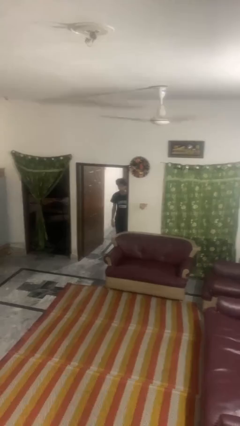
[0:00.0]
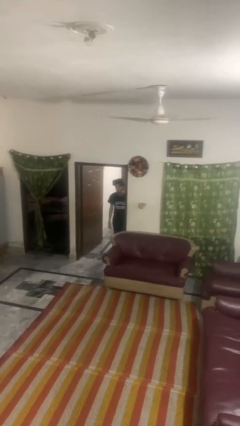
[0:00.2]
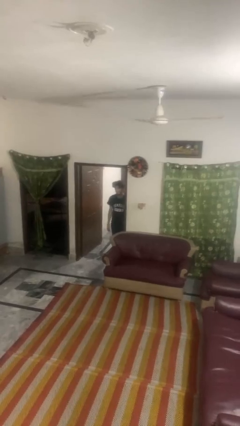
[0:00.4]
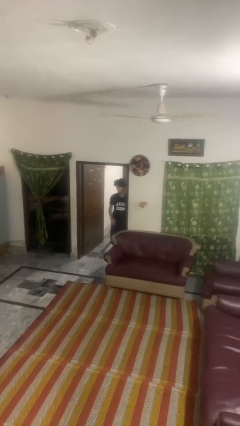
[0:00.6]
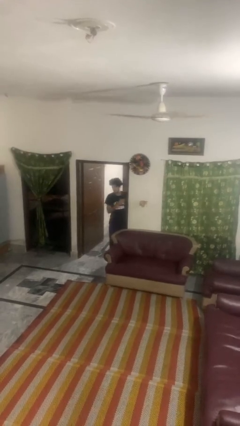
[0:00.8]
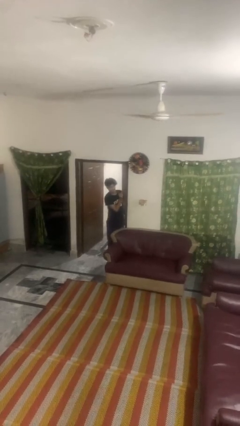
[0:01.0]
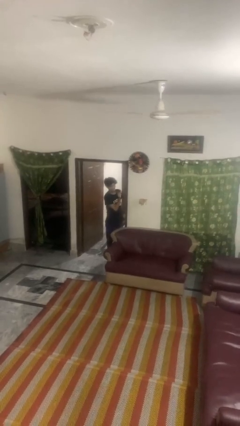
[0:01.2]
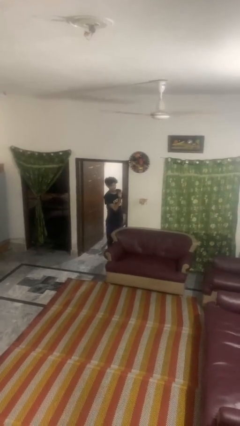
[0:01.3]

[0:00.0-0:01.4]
person bumps into wall

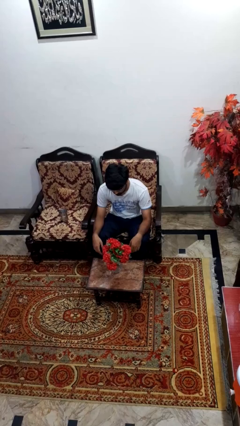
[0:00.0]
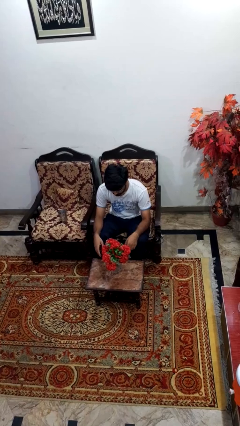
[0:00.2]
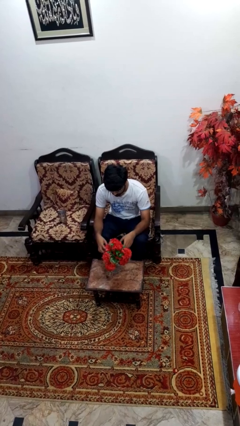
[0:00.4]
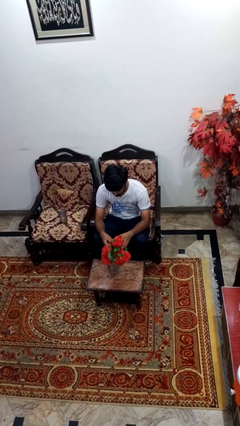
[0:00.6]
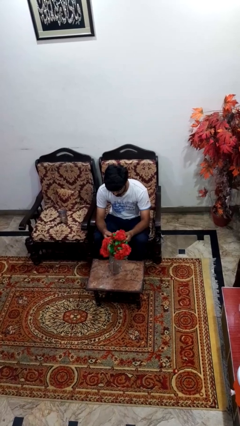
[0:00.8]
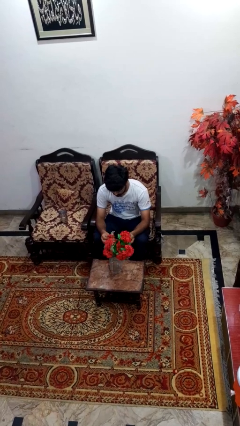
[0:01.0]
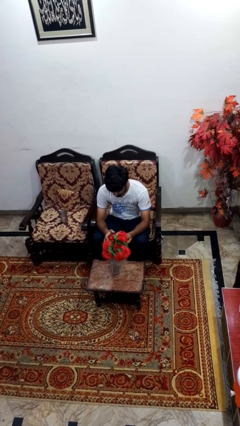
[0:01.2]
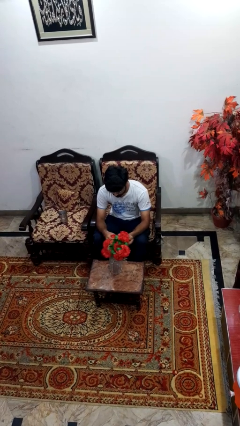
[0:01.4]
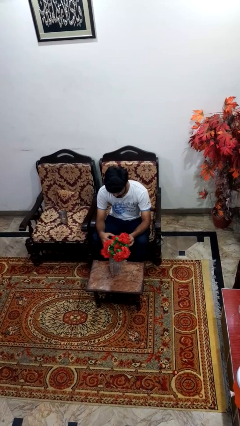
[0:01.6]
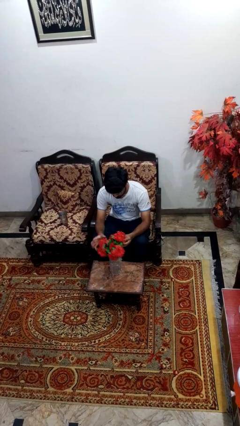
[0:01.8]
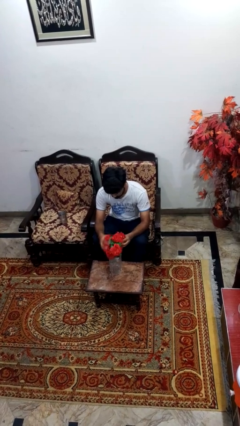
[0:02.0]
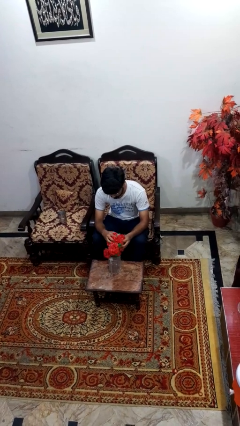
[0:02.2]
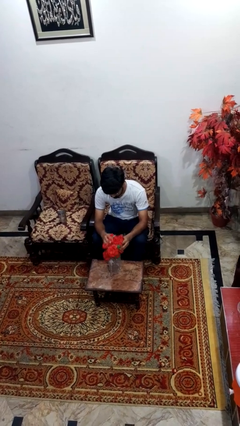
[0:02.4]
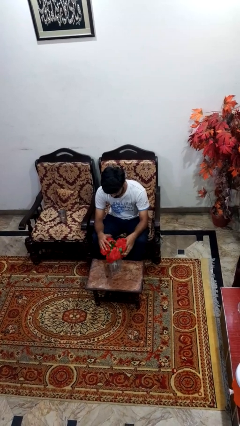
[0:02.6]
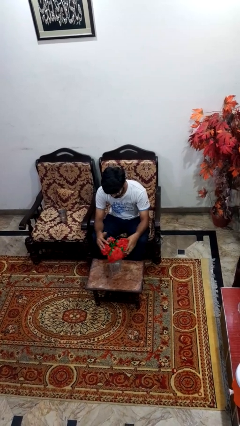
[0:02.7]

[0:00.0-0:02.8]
person arranges flowers in vase

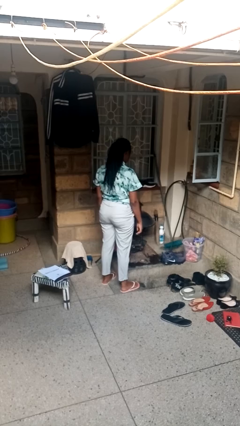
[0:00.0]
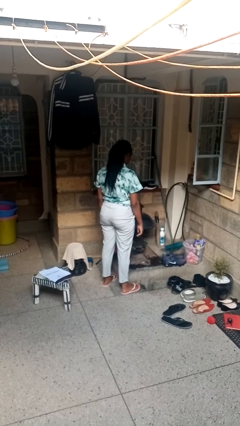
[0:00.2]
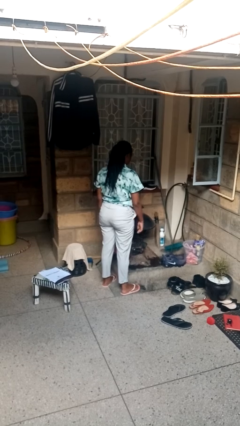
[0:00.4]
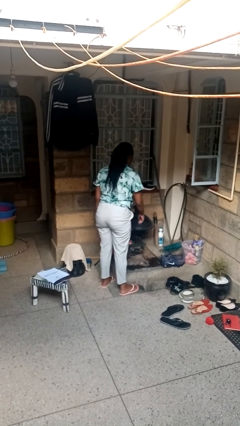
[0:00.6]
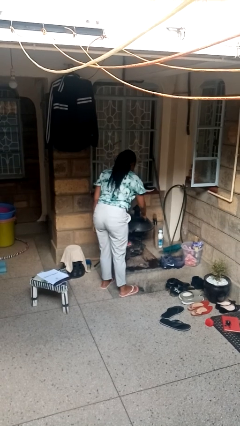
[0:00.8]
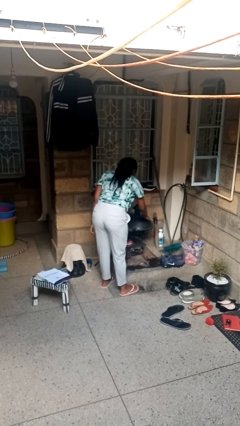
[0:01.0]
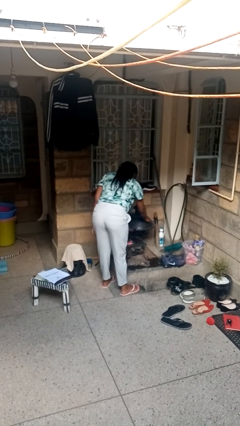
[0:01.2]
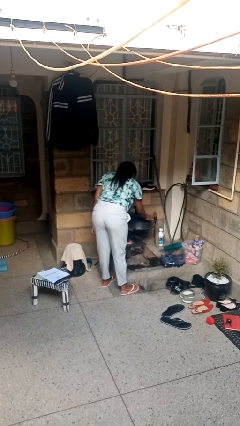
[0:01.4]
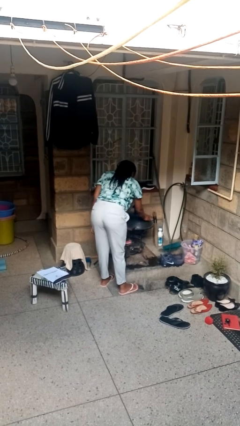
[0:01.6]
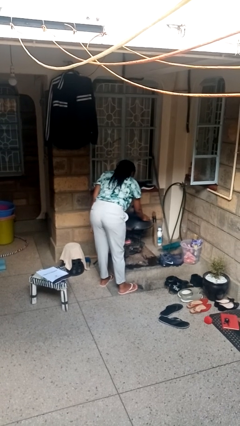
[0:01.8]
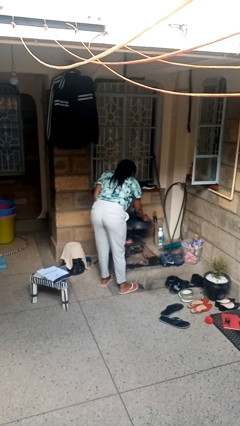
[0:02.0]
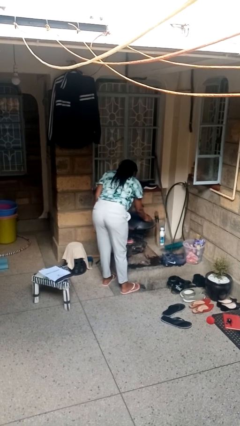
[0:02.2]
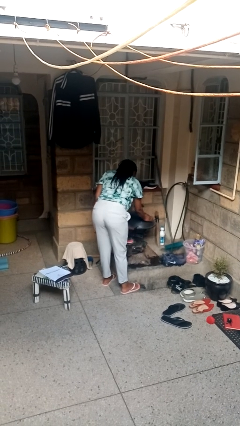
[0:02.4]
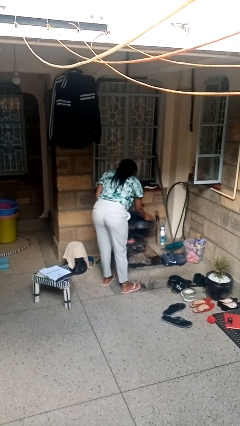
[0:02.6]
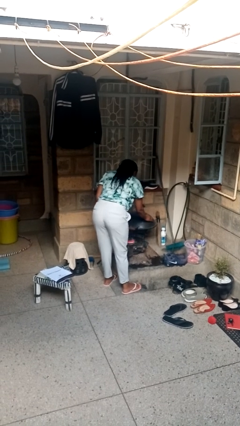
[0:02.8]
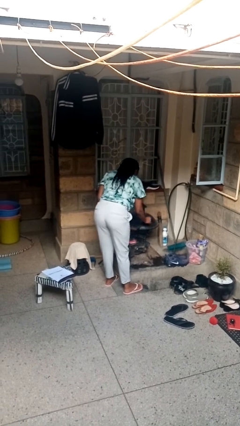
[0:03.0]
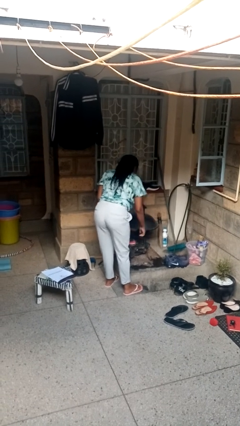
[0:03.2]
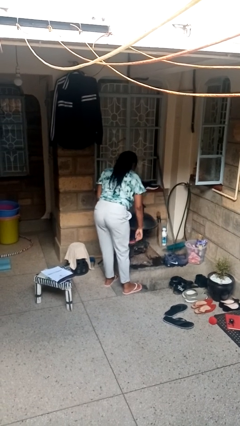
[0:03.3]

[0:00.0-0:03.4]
person taps object with finger

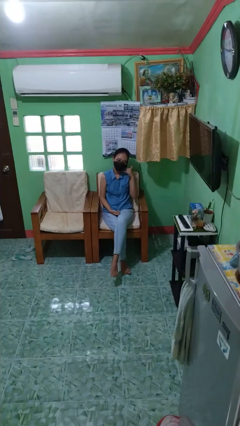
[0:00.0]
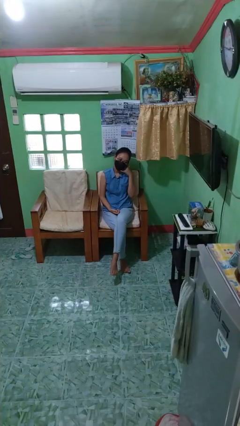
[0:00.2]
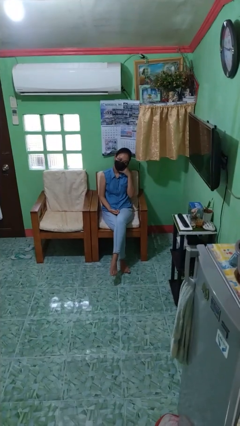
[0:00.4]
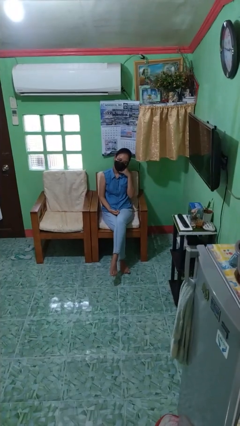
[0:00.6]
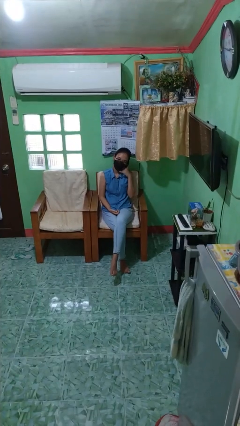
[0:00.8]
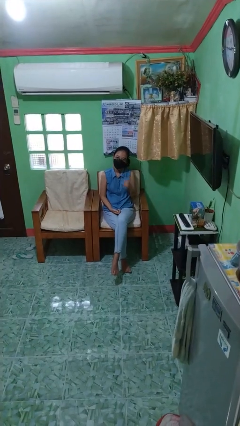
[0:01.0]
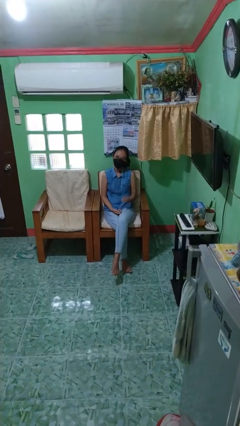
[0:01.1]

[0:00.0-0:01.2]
person gestures call me

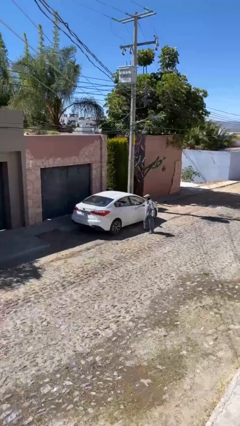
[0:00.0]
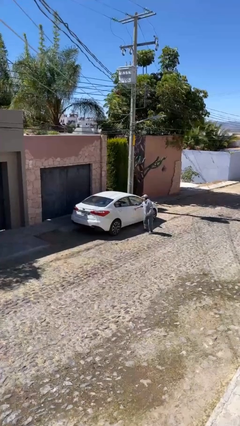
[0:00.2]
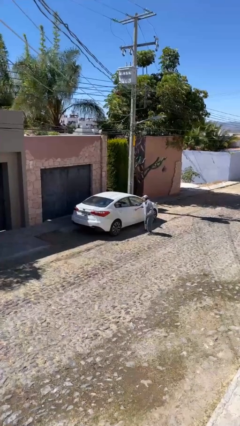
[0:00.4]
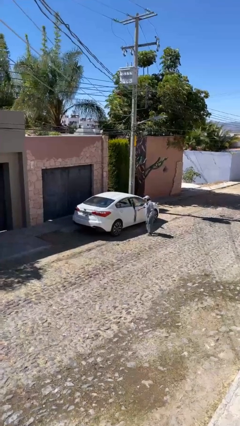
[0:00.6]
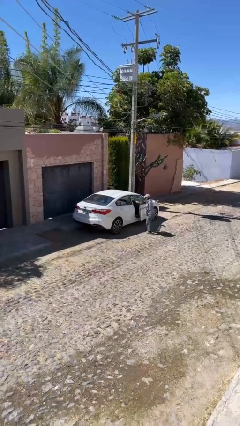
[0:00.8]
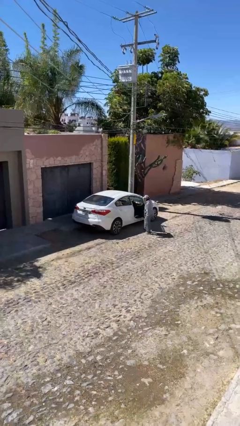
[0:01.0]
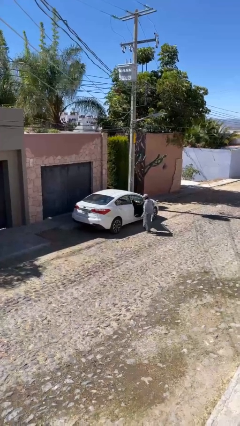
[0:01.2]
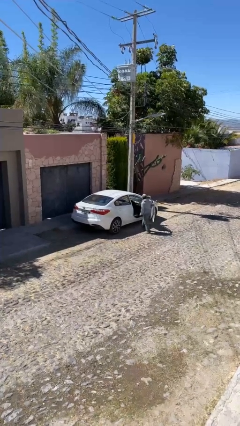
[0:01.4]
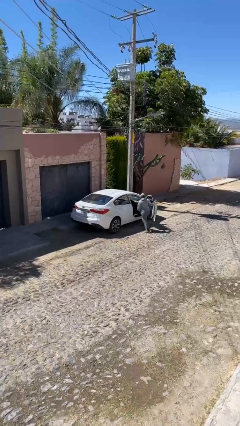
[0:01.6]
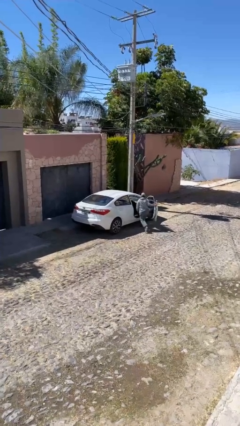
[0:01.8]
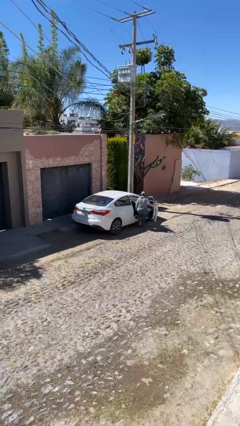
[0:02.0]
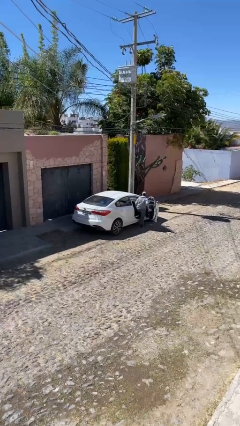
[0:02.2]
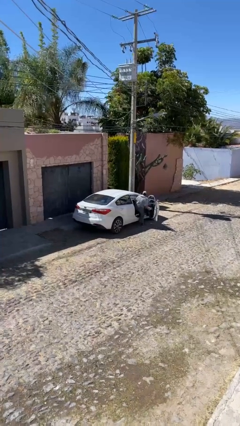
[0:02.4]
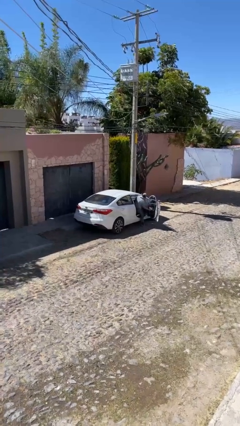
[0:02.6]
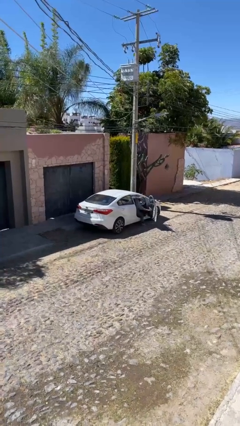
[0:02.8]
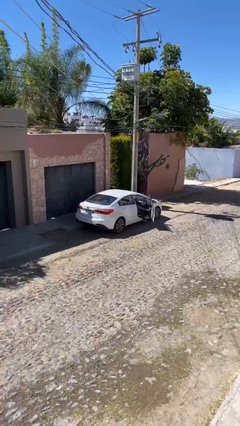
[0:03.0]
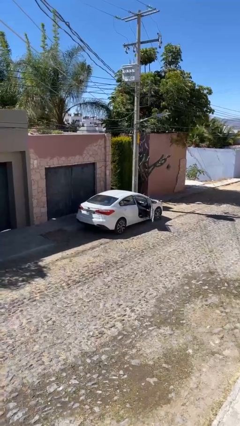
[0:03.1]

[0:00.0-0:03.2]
car picks up person

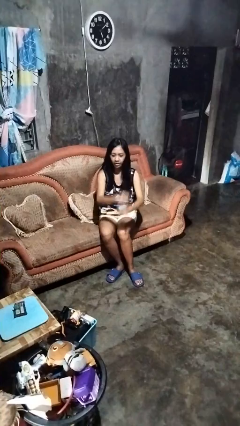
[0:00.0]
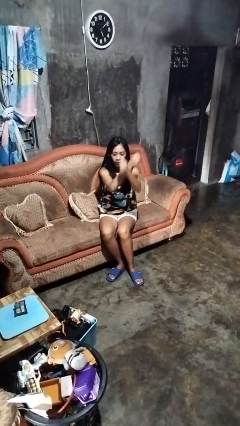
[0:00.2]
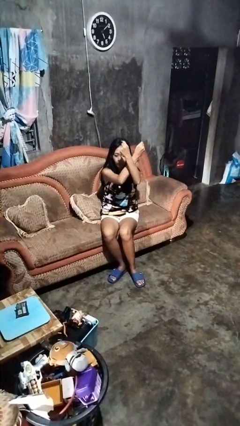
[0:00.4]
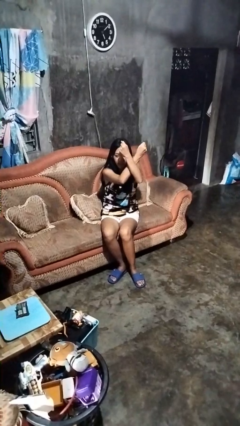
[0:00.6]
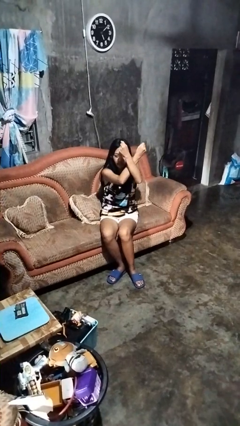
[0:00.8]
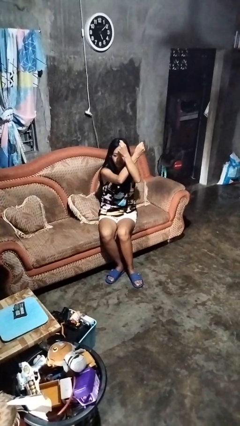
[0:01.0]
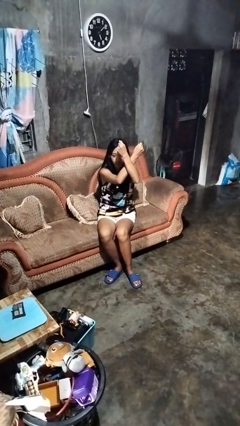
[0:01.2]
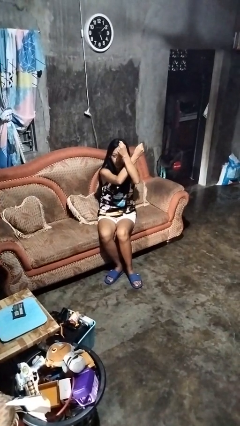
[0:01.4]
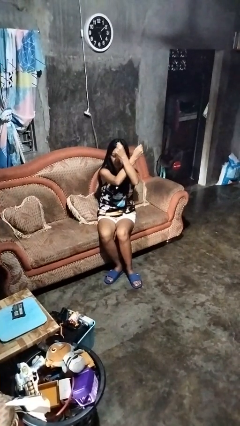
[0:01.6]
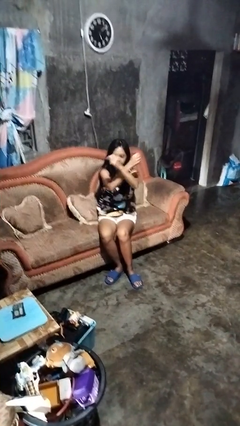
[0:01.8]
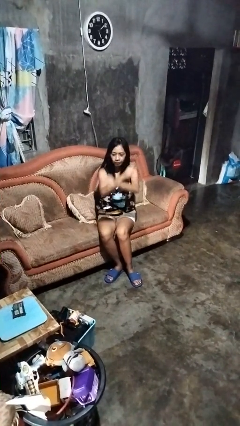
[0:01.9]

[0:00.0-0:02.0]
person gestures arms x

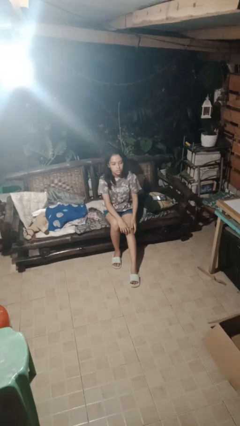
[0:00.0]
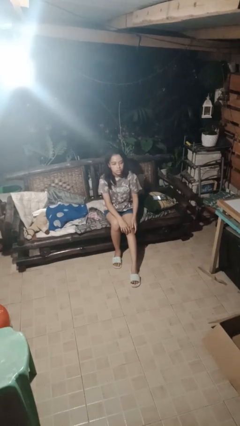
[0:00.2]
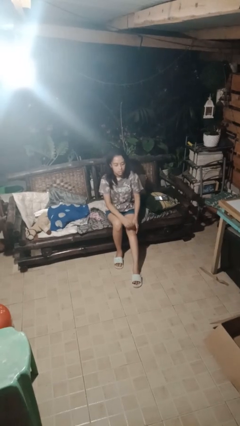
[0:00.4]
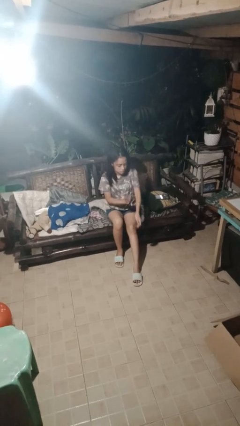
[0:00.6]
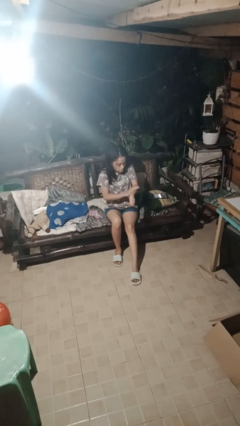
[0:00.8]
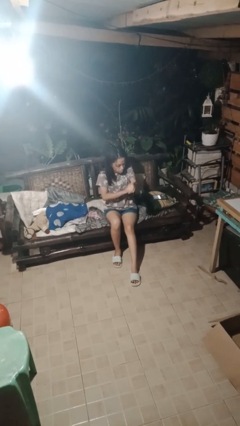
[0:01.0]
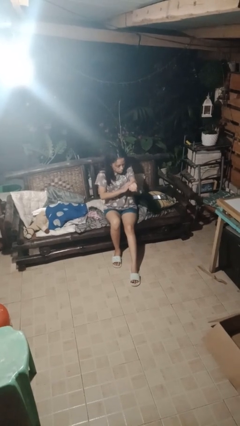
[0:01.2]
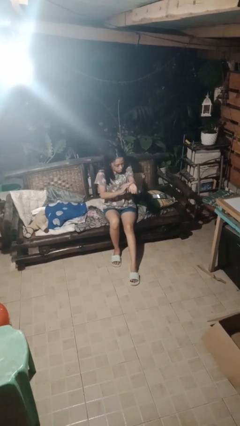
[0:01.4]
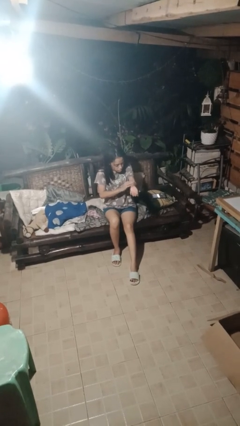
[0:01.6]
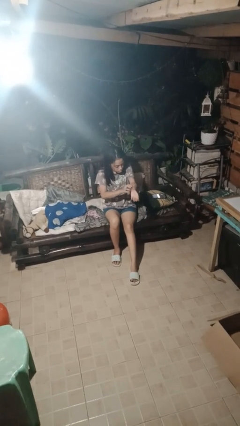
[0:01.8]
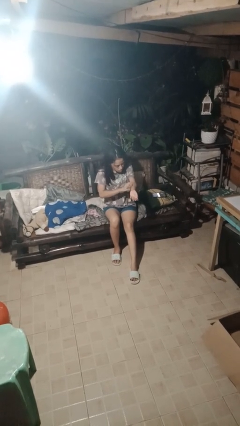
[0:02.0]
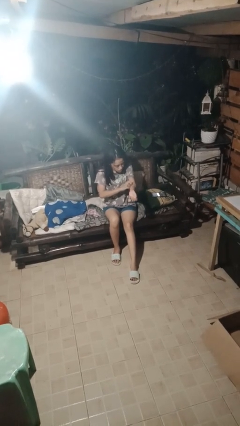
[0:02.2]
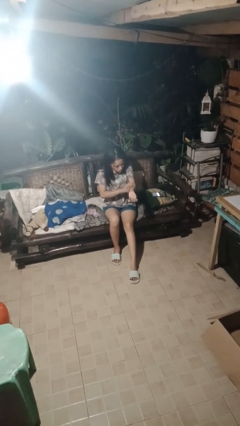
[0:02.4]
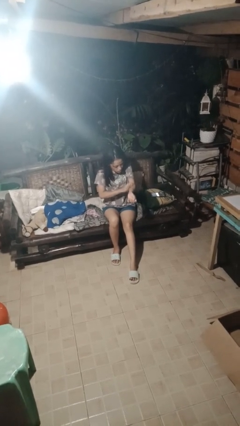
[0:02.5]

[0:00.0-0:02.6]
person swats bug

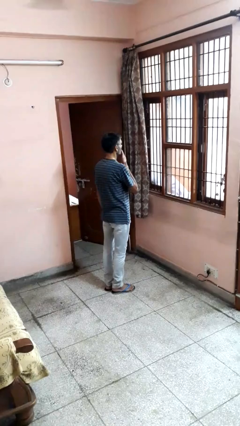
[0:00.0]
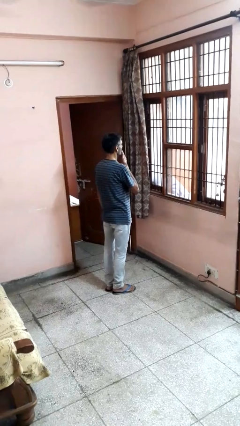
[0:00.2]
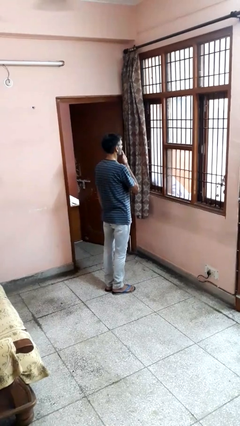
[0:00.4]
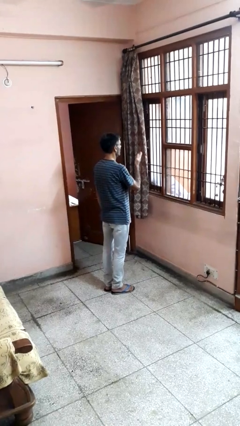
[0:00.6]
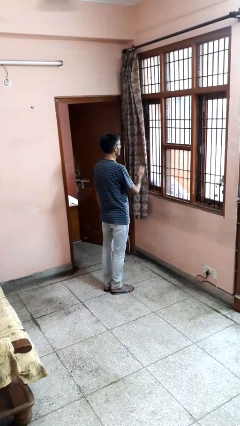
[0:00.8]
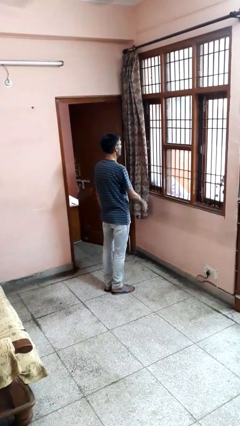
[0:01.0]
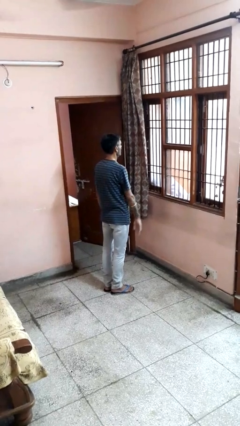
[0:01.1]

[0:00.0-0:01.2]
person gestures blow kiss
